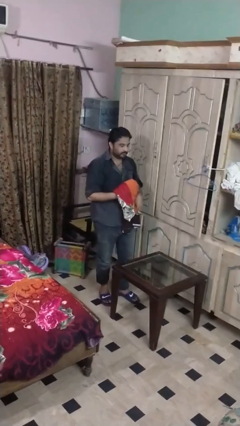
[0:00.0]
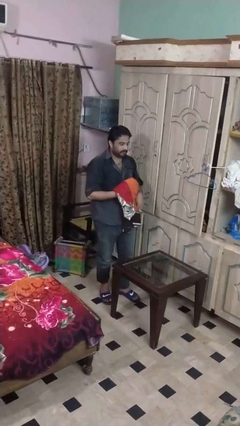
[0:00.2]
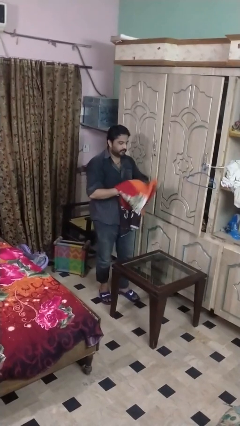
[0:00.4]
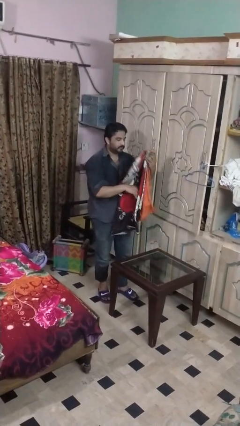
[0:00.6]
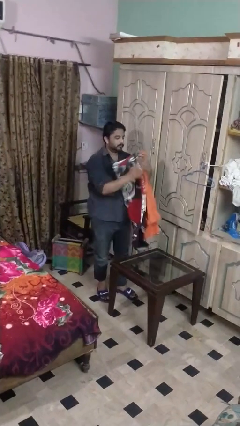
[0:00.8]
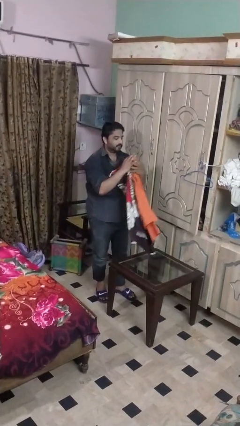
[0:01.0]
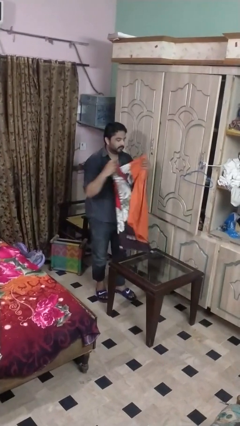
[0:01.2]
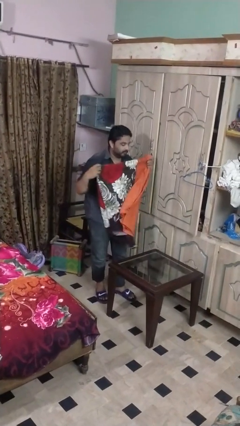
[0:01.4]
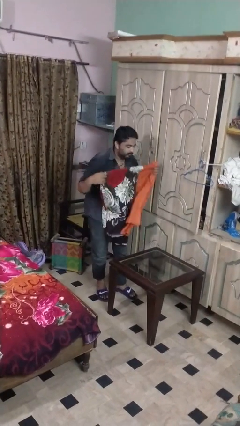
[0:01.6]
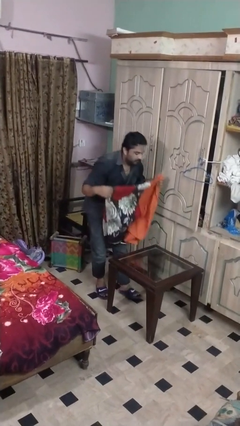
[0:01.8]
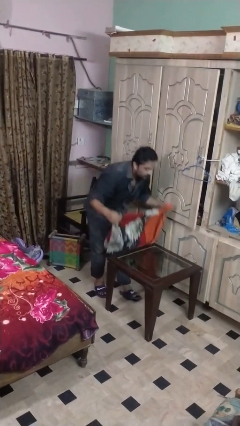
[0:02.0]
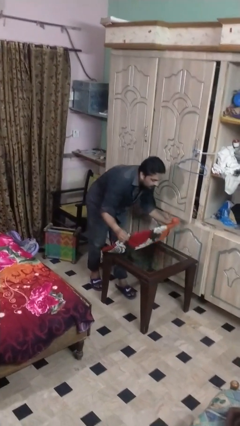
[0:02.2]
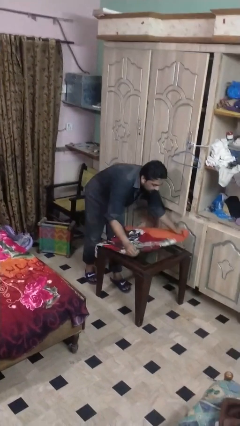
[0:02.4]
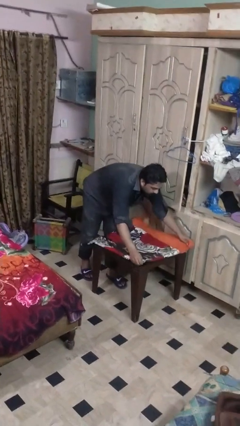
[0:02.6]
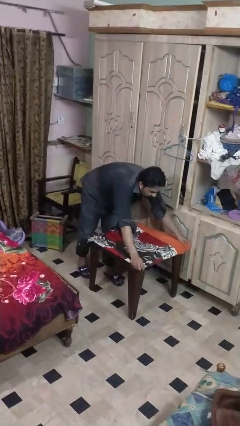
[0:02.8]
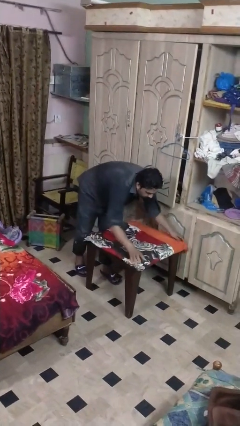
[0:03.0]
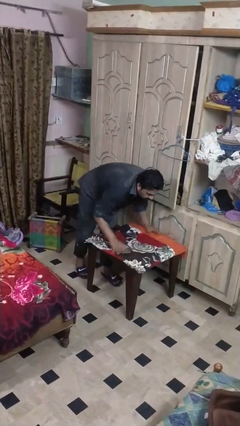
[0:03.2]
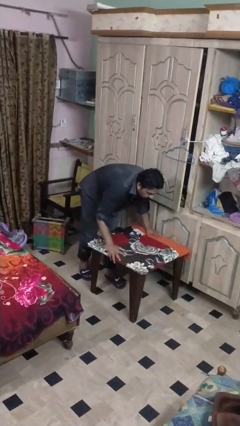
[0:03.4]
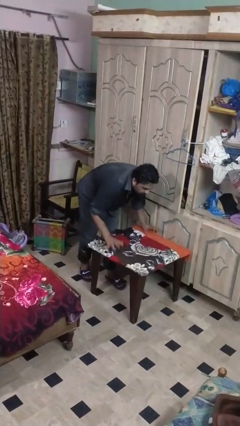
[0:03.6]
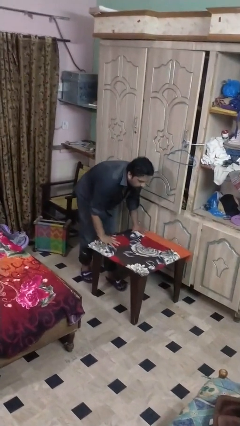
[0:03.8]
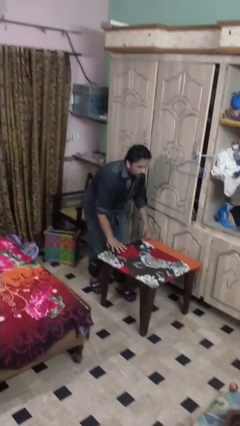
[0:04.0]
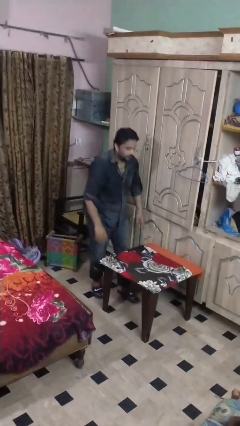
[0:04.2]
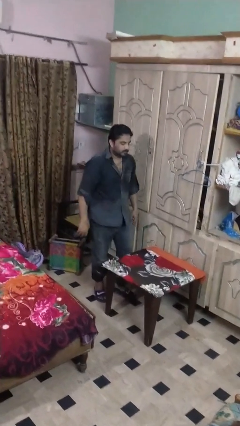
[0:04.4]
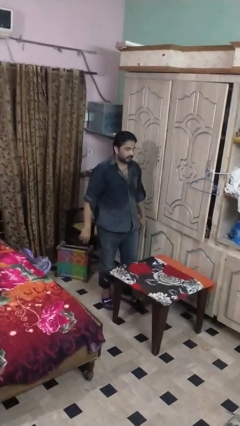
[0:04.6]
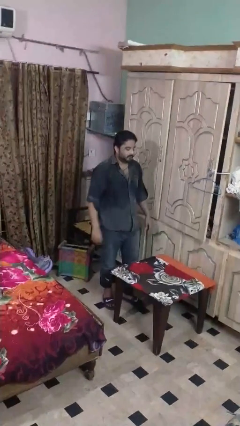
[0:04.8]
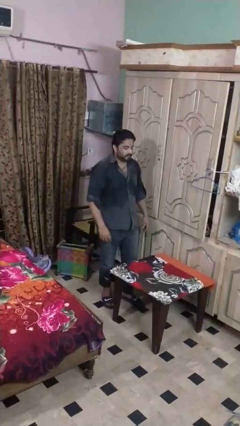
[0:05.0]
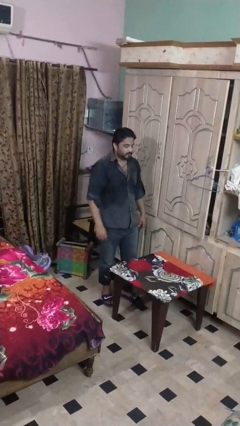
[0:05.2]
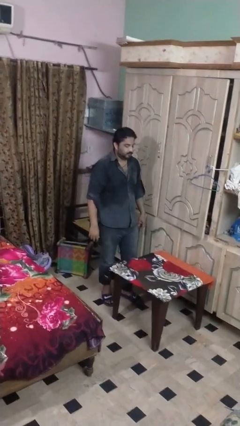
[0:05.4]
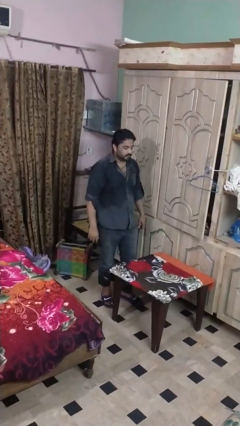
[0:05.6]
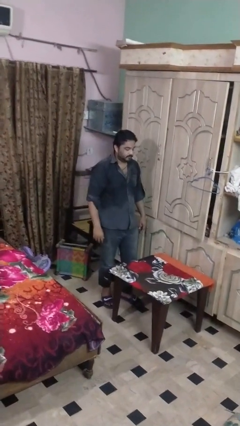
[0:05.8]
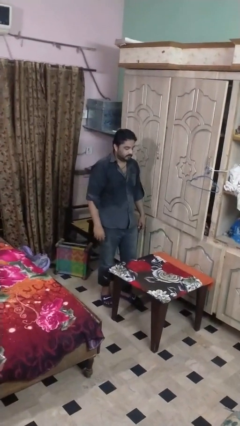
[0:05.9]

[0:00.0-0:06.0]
person spreads tablecloth

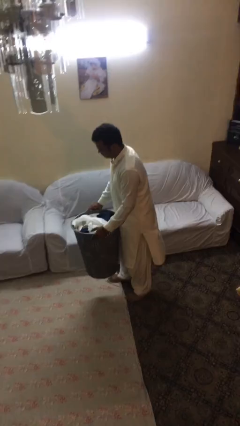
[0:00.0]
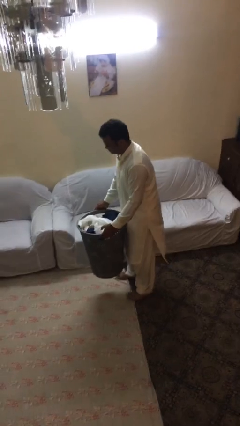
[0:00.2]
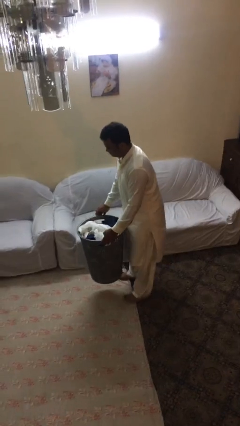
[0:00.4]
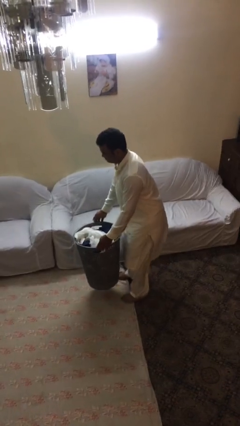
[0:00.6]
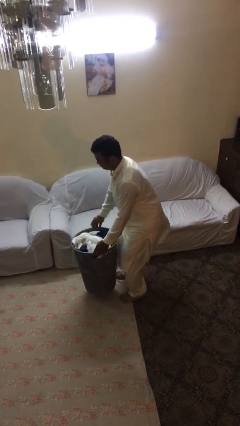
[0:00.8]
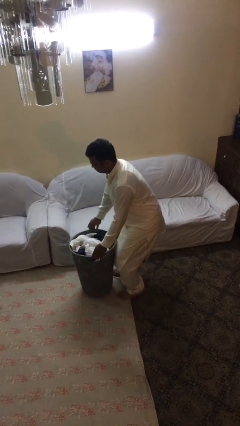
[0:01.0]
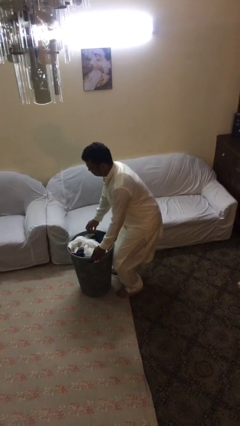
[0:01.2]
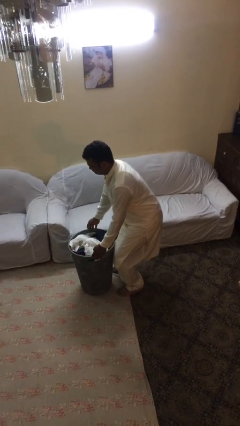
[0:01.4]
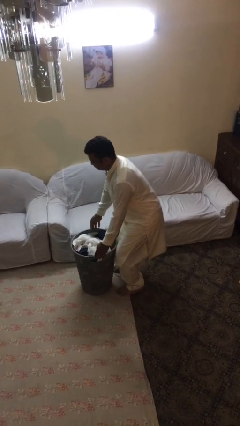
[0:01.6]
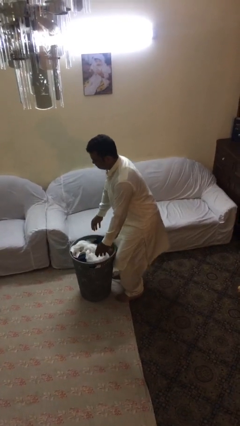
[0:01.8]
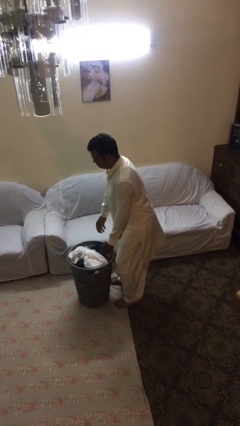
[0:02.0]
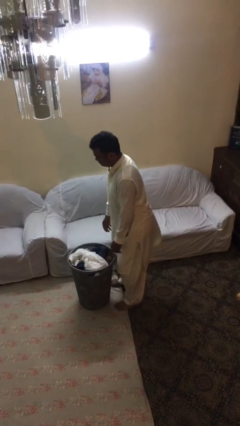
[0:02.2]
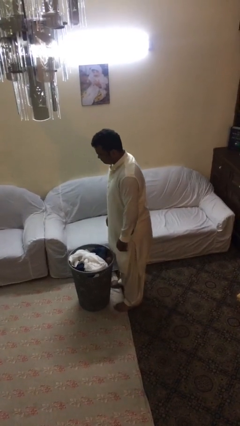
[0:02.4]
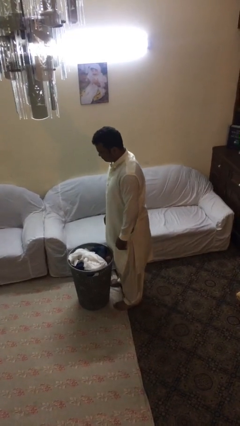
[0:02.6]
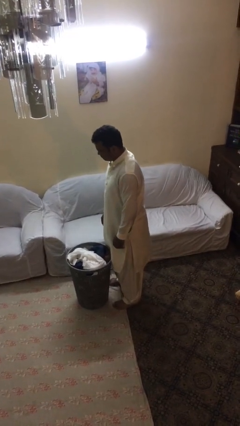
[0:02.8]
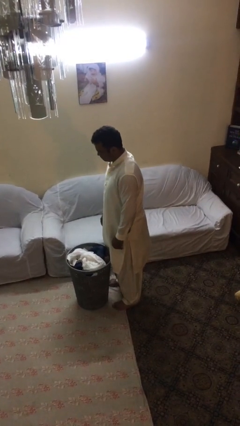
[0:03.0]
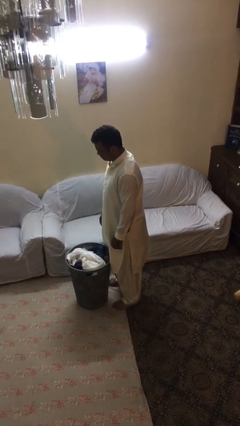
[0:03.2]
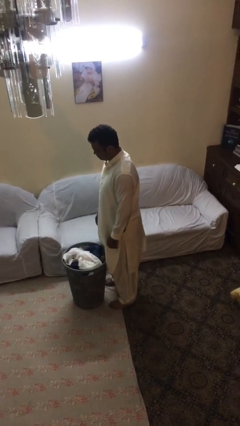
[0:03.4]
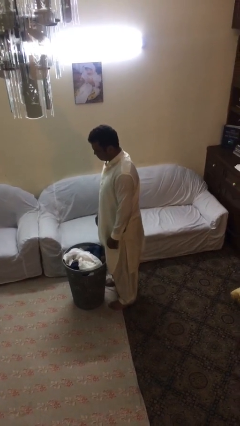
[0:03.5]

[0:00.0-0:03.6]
person puts down object on floor

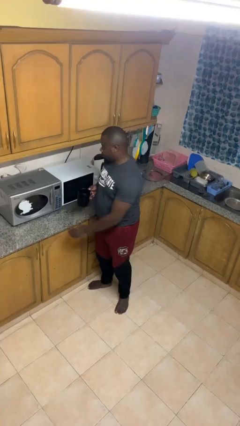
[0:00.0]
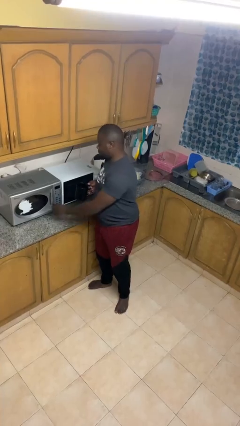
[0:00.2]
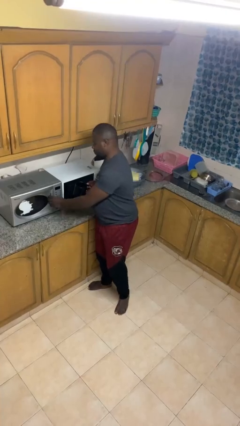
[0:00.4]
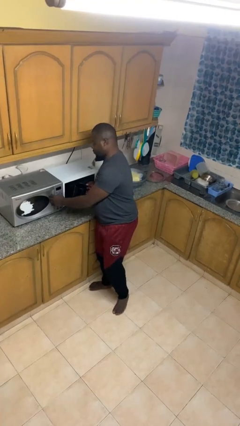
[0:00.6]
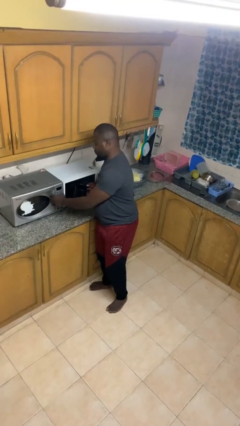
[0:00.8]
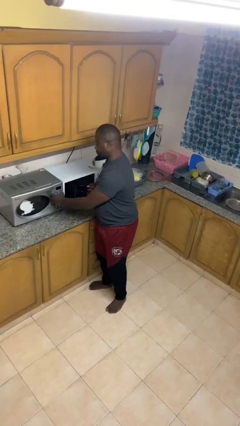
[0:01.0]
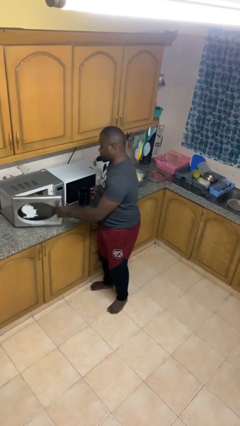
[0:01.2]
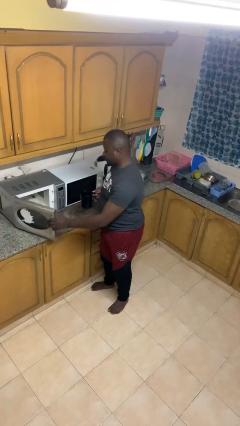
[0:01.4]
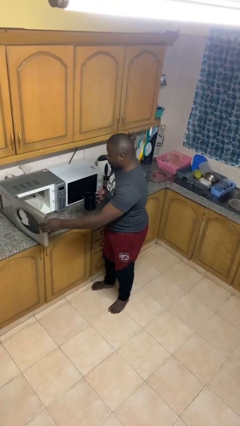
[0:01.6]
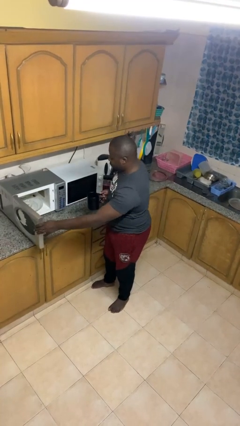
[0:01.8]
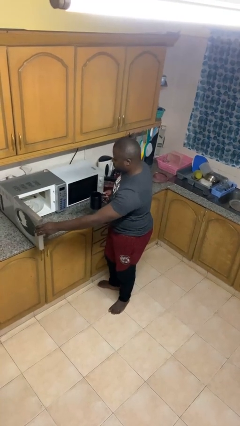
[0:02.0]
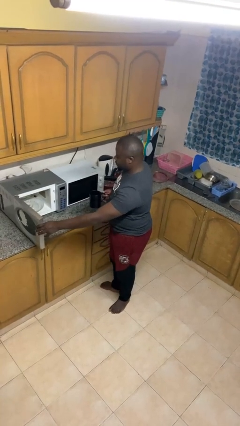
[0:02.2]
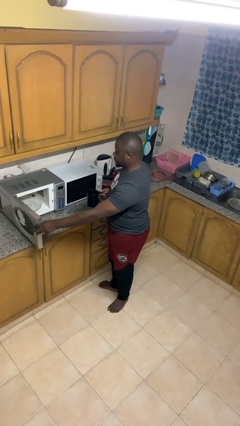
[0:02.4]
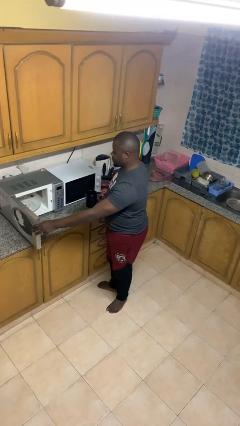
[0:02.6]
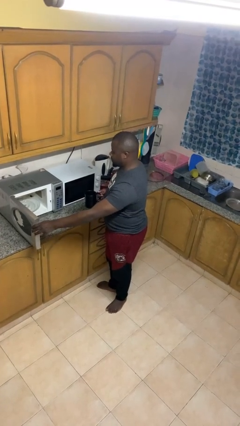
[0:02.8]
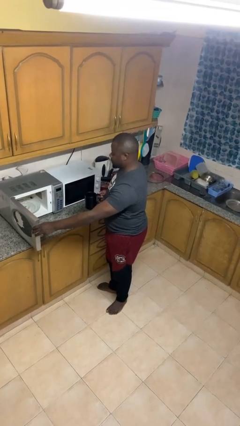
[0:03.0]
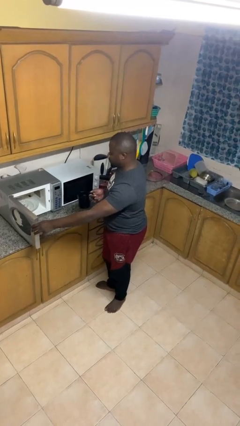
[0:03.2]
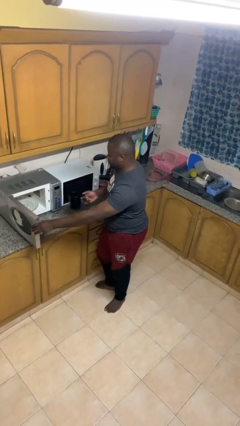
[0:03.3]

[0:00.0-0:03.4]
person opens microwave

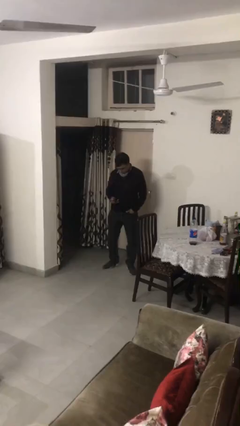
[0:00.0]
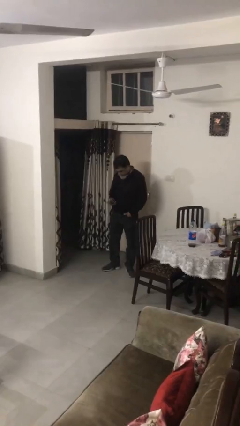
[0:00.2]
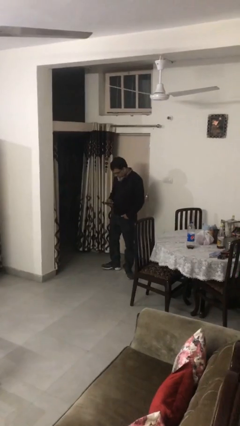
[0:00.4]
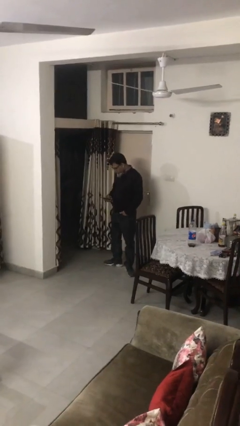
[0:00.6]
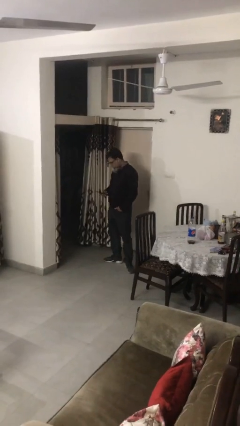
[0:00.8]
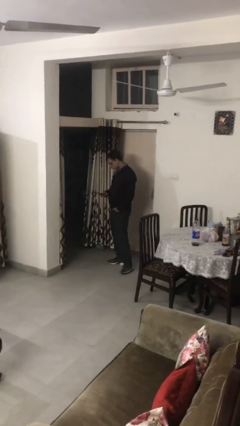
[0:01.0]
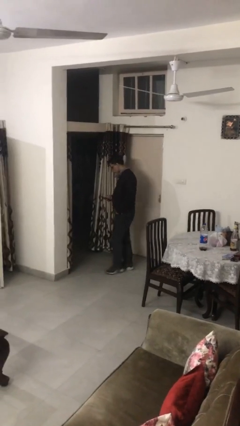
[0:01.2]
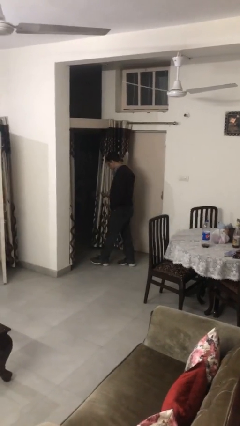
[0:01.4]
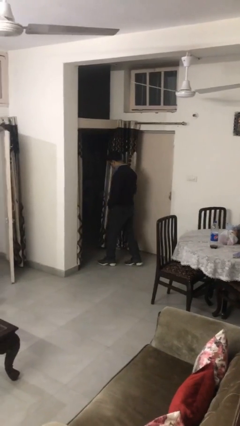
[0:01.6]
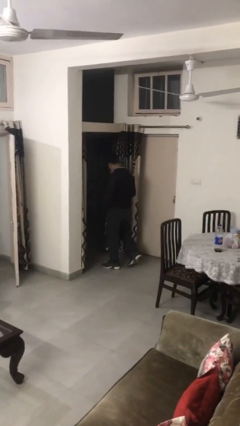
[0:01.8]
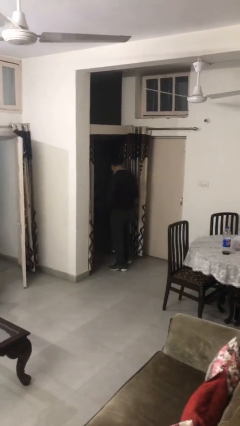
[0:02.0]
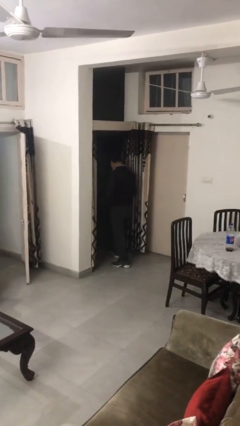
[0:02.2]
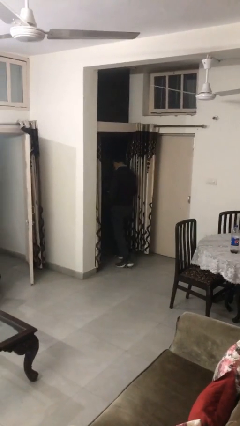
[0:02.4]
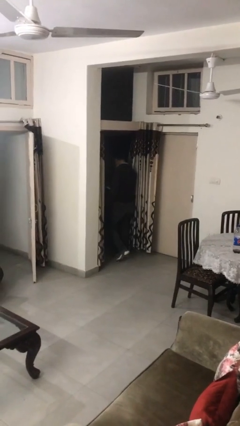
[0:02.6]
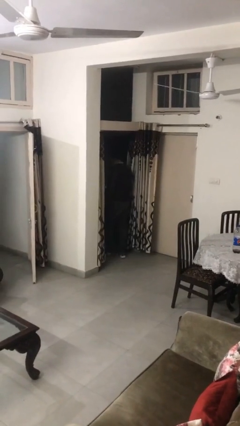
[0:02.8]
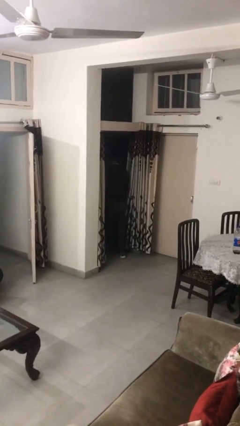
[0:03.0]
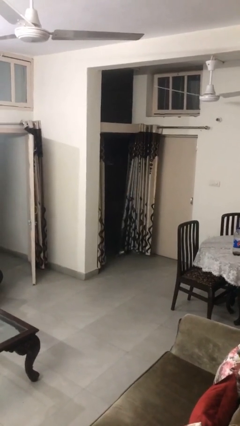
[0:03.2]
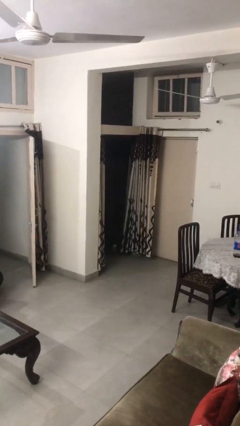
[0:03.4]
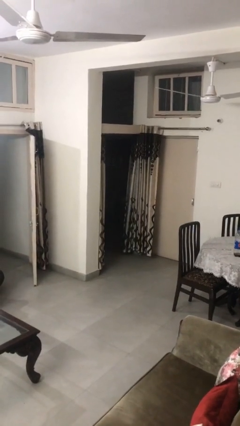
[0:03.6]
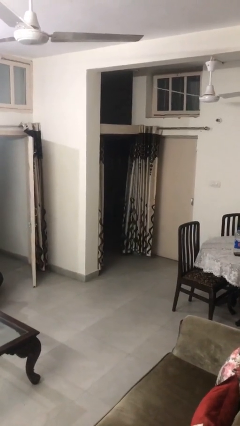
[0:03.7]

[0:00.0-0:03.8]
person exits scene through structure

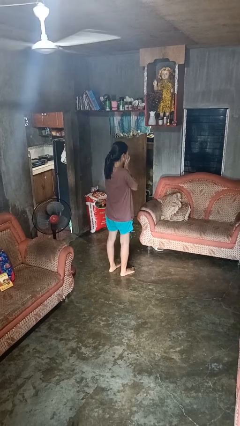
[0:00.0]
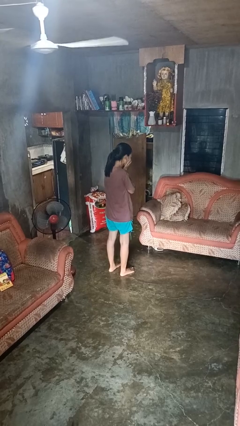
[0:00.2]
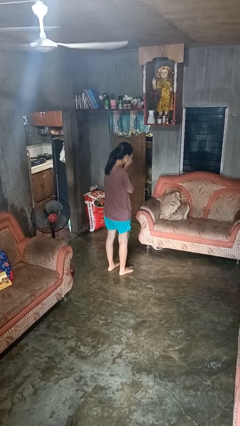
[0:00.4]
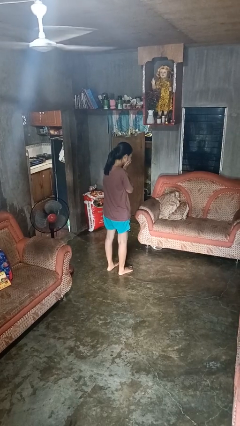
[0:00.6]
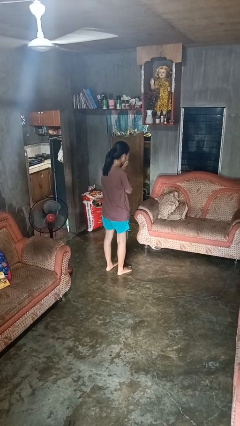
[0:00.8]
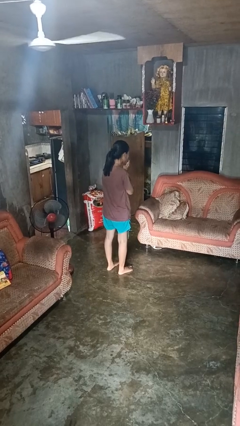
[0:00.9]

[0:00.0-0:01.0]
person sneezes into hand
